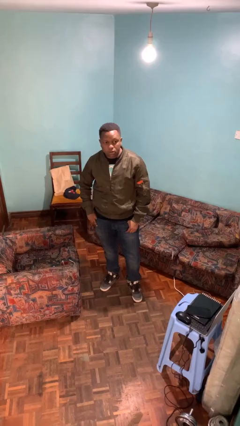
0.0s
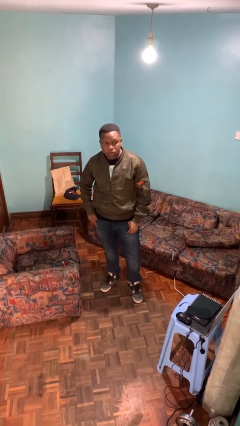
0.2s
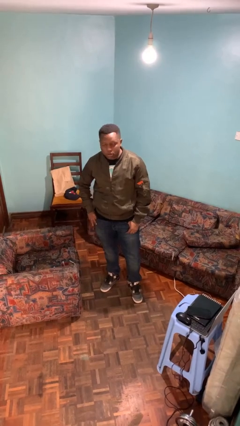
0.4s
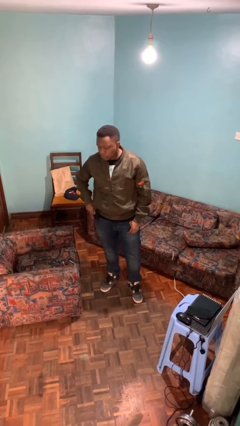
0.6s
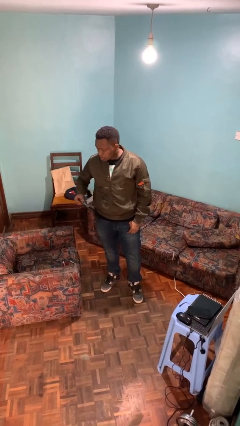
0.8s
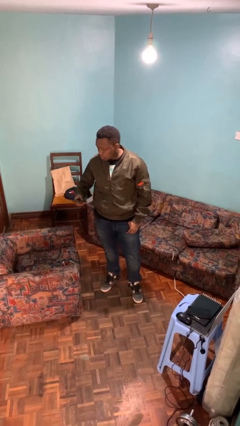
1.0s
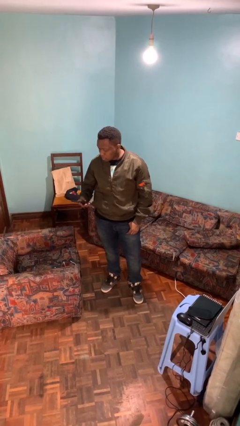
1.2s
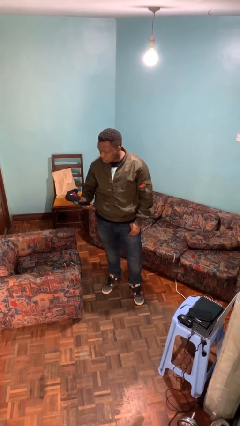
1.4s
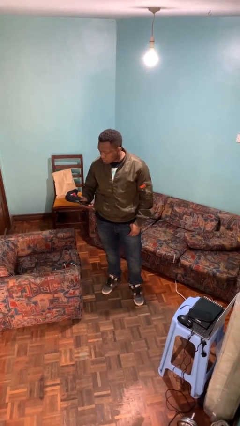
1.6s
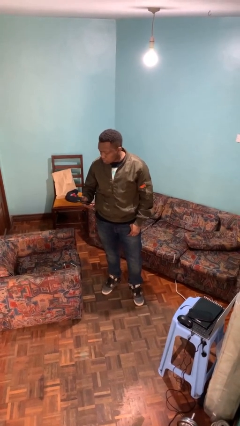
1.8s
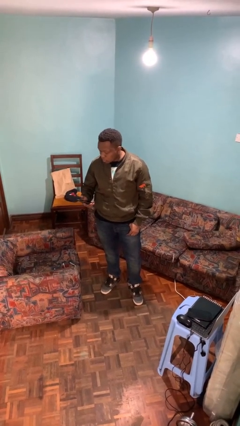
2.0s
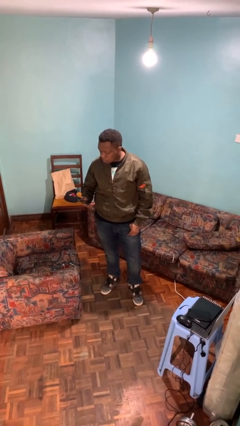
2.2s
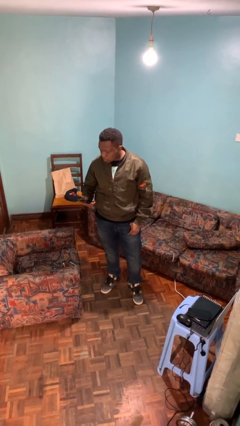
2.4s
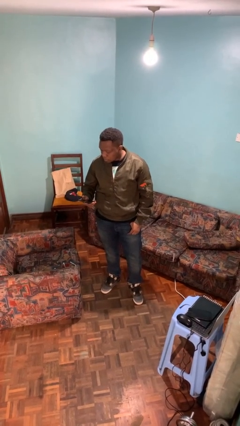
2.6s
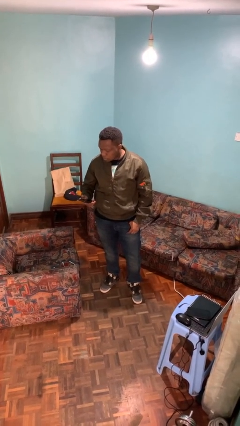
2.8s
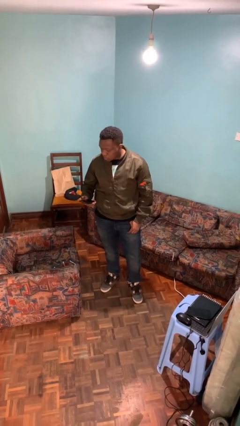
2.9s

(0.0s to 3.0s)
person takes phone from pocket

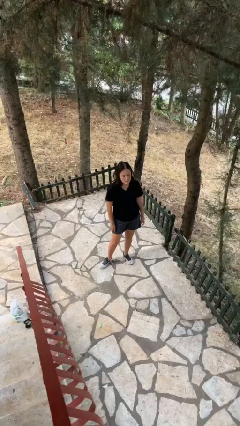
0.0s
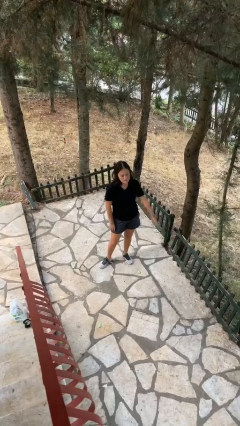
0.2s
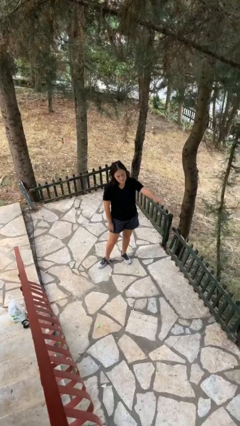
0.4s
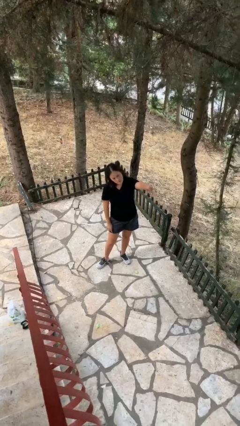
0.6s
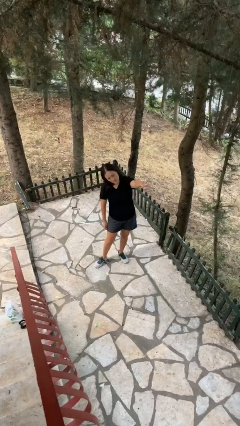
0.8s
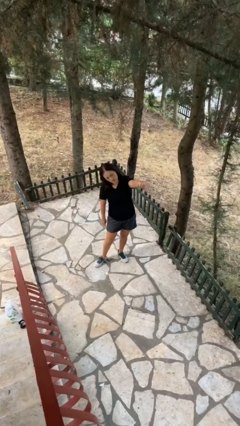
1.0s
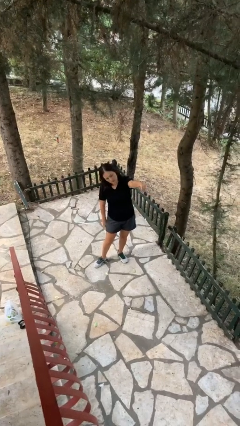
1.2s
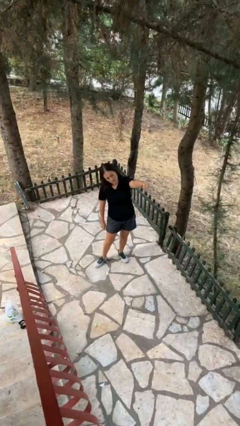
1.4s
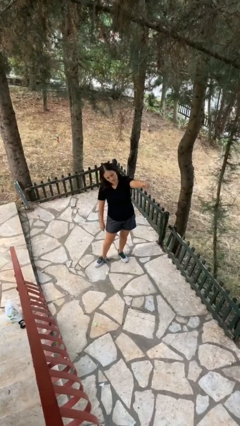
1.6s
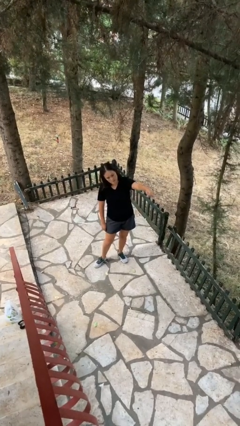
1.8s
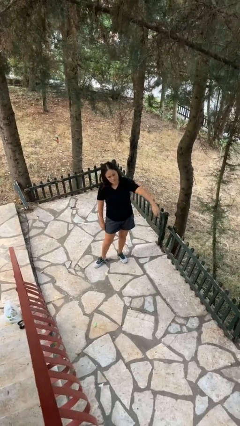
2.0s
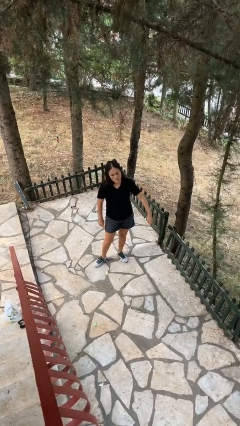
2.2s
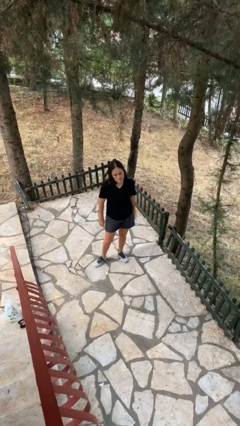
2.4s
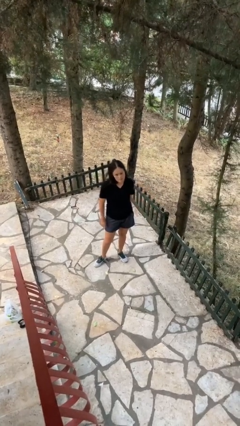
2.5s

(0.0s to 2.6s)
person gestures come here

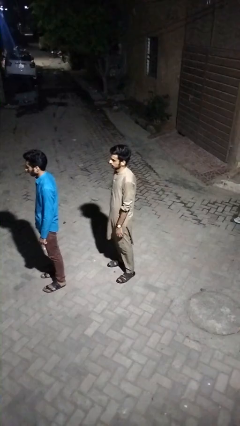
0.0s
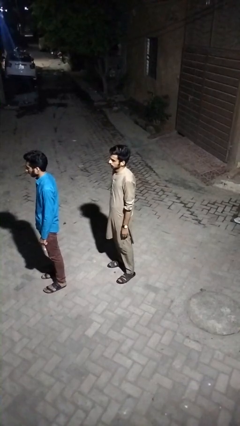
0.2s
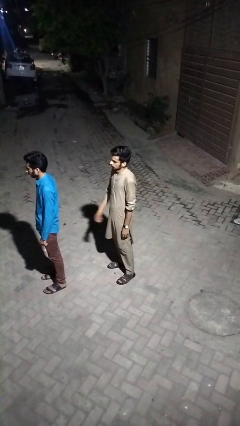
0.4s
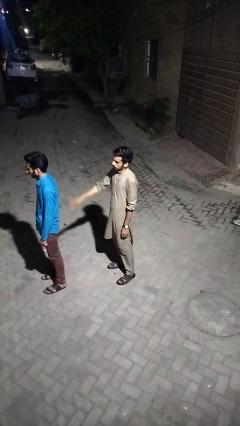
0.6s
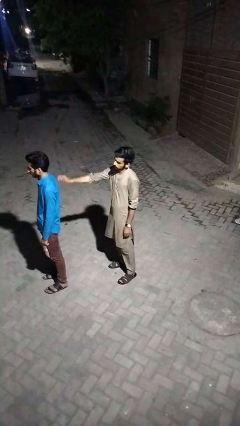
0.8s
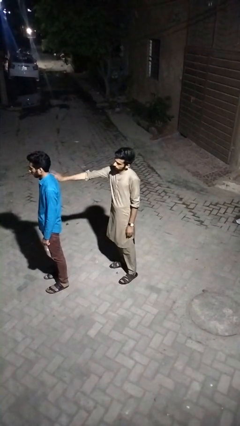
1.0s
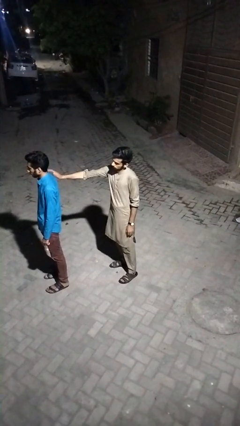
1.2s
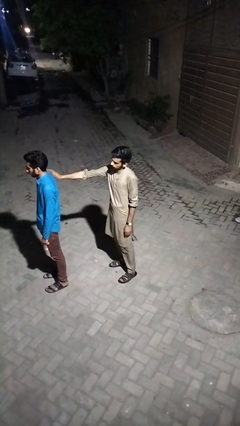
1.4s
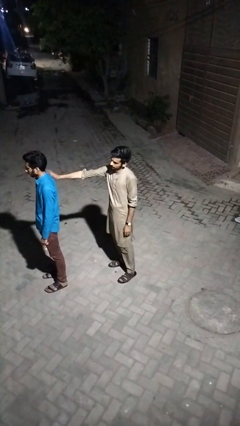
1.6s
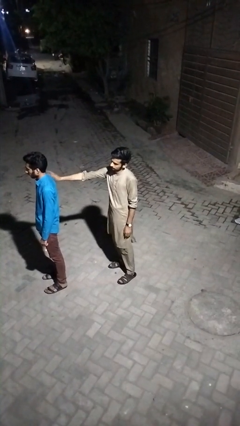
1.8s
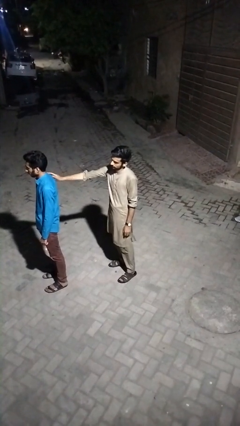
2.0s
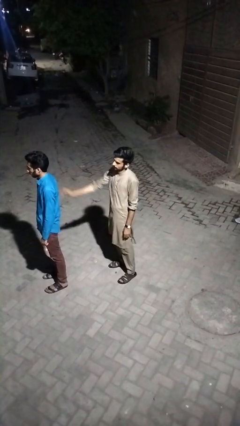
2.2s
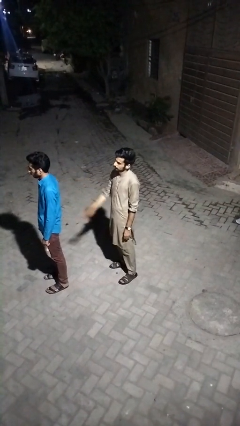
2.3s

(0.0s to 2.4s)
person touches back of person

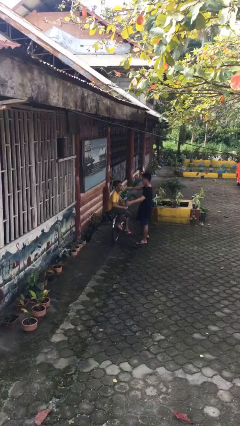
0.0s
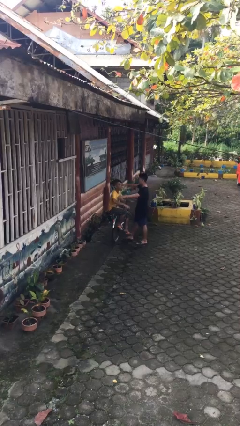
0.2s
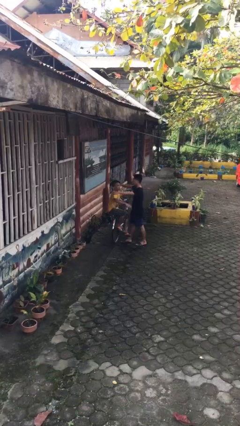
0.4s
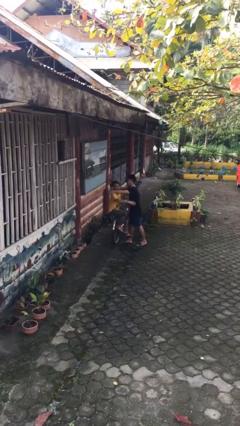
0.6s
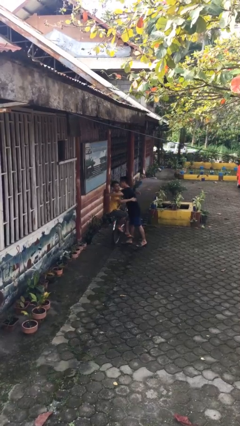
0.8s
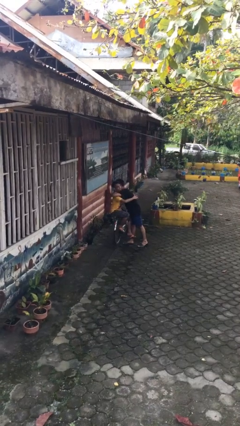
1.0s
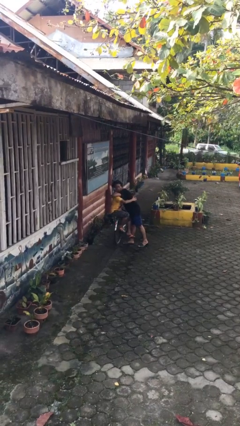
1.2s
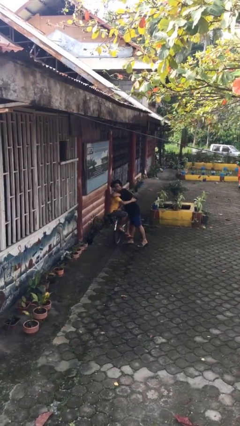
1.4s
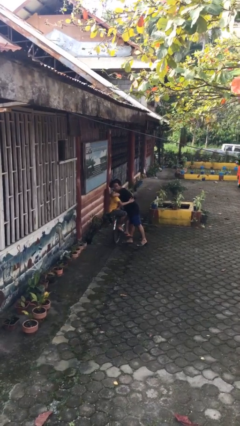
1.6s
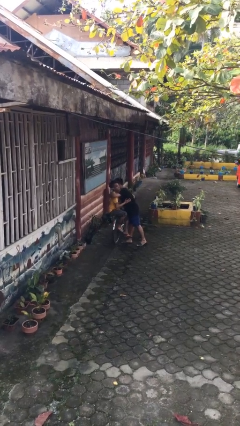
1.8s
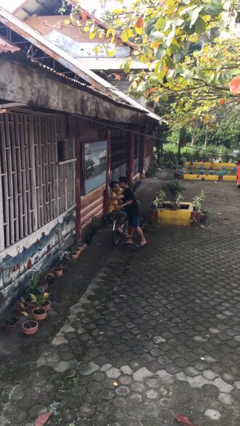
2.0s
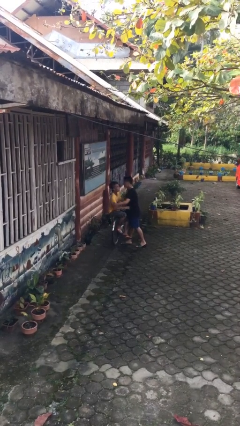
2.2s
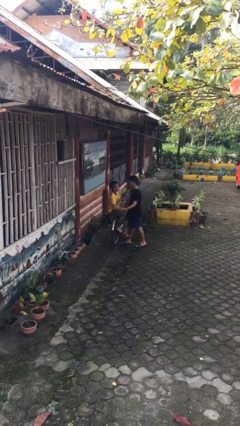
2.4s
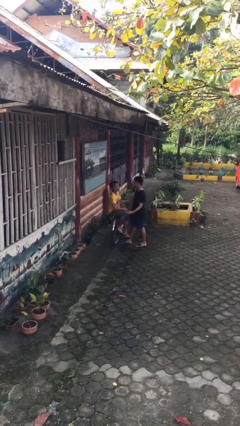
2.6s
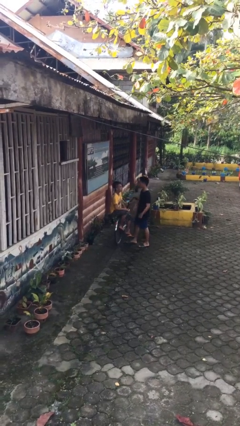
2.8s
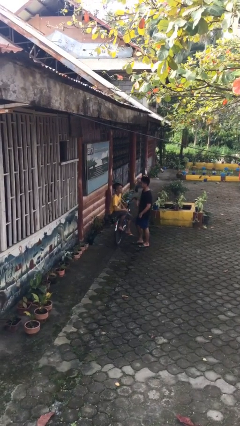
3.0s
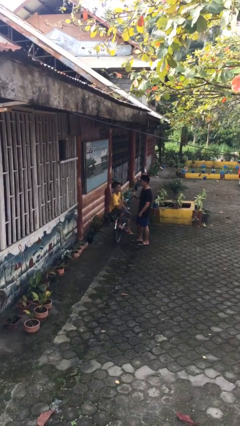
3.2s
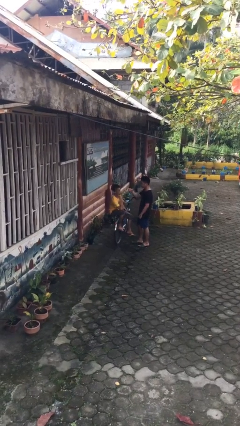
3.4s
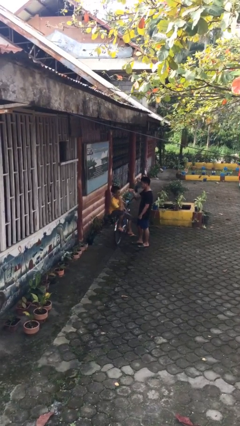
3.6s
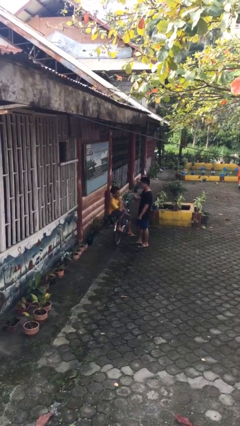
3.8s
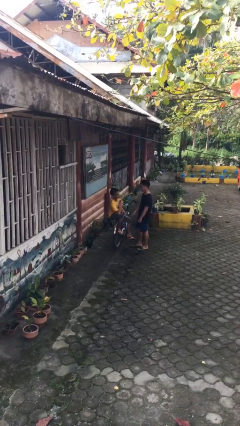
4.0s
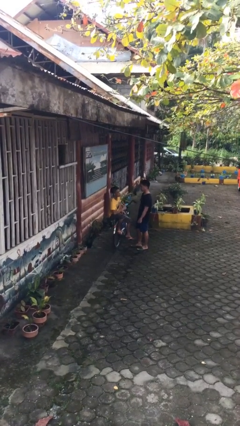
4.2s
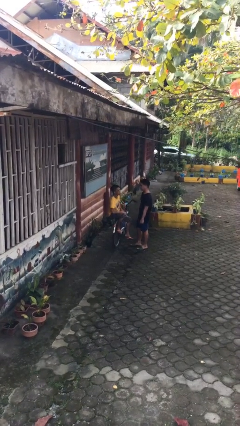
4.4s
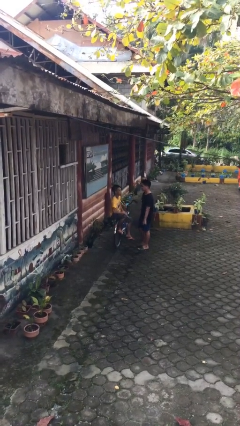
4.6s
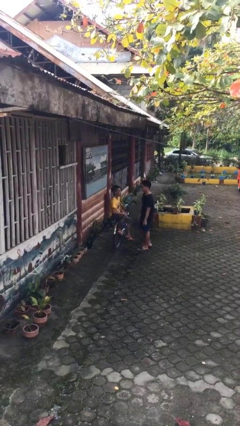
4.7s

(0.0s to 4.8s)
person embraces person

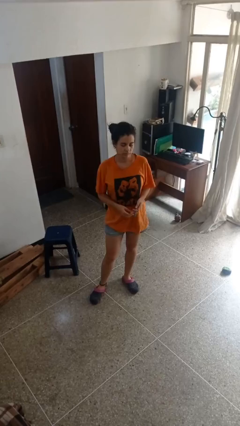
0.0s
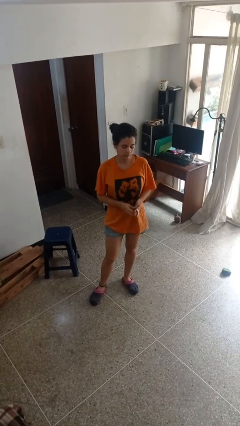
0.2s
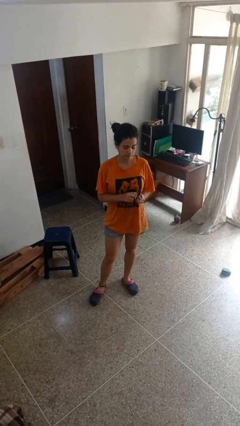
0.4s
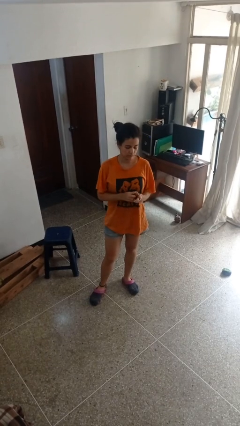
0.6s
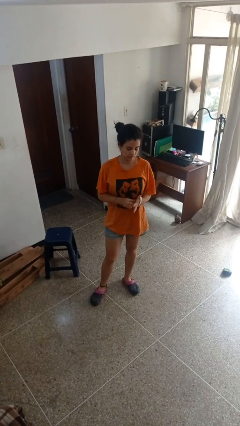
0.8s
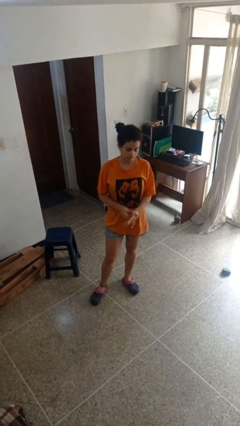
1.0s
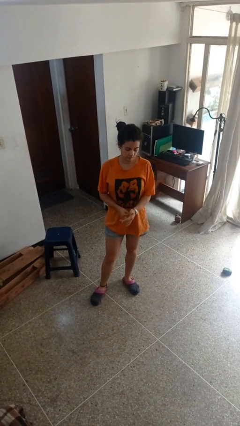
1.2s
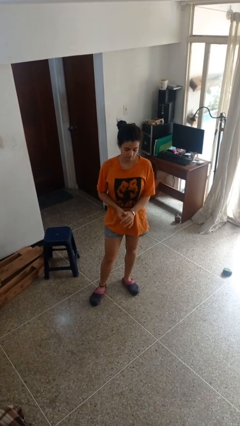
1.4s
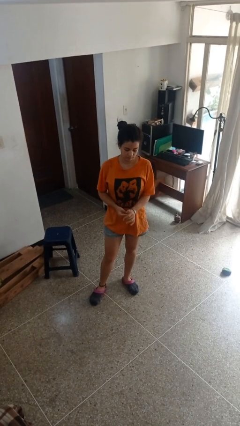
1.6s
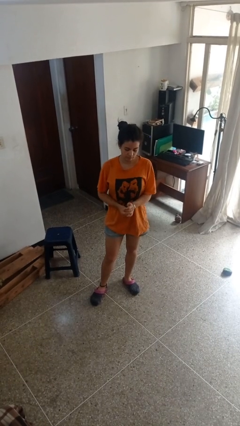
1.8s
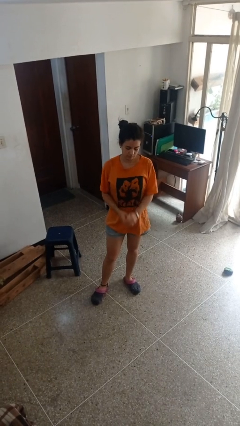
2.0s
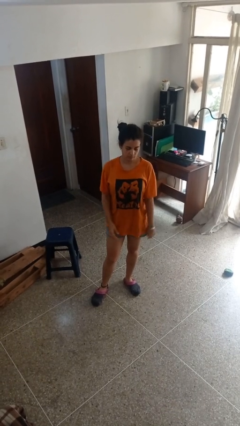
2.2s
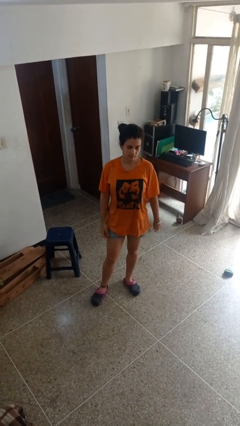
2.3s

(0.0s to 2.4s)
person puts on wristwatch

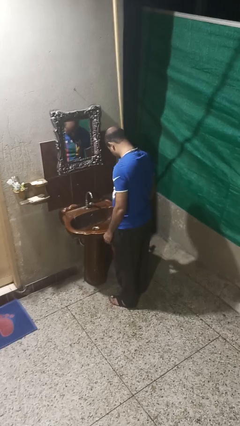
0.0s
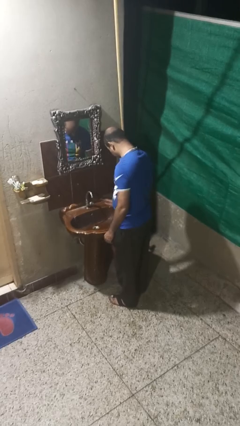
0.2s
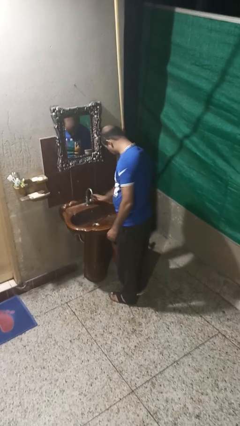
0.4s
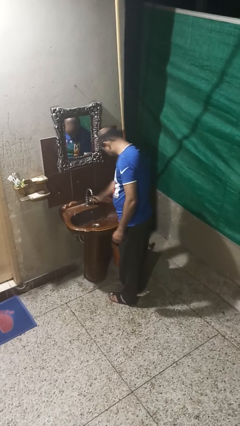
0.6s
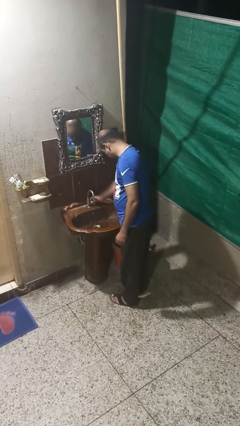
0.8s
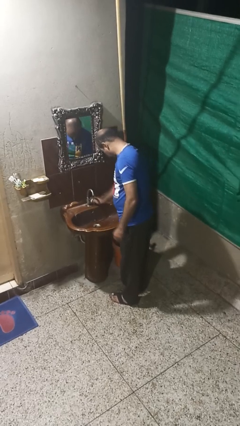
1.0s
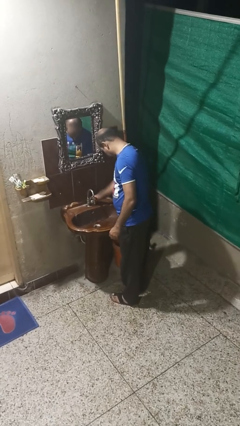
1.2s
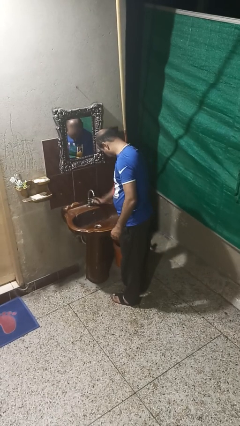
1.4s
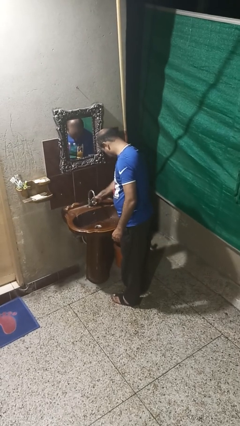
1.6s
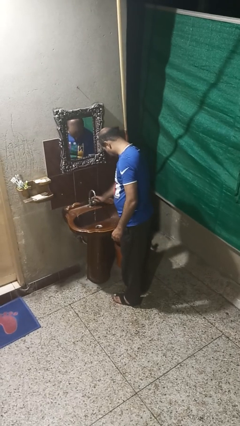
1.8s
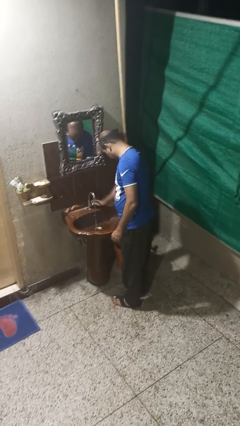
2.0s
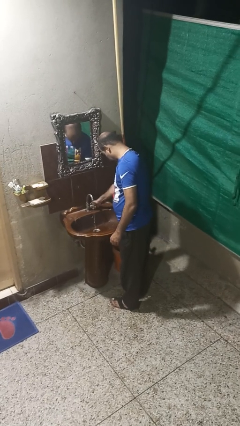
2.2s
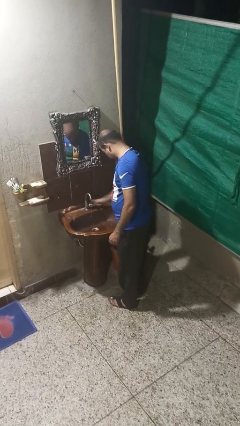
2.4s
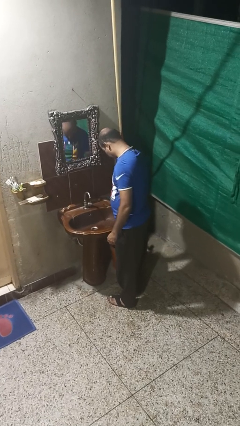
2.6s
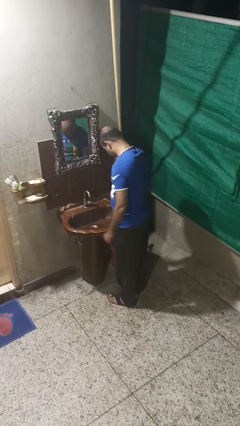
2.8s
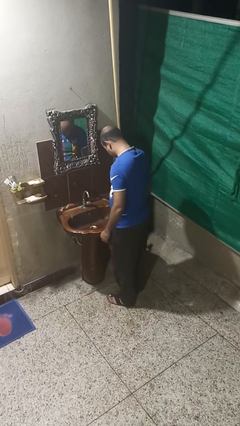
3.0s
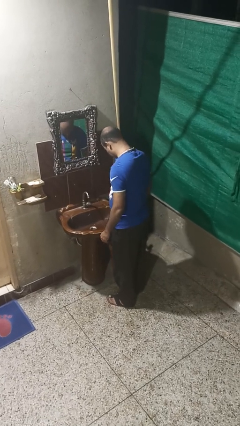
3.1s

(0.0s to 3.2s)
person turns off faucet
